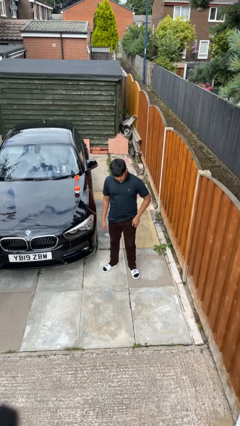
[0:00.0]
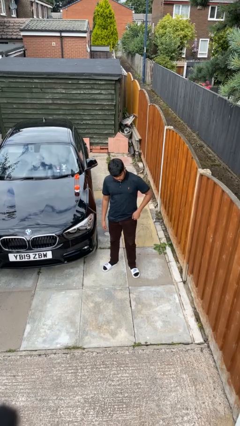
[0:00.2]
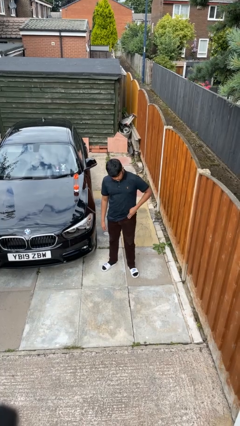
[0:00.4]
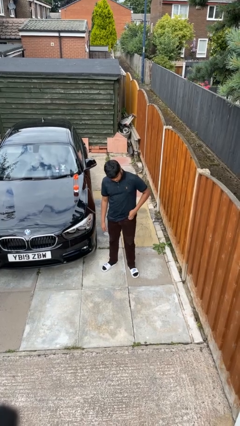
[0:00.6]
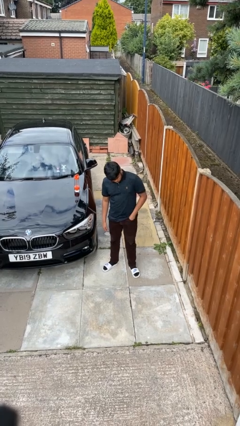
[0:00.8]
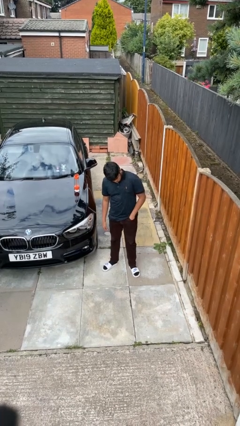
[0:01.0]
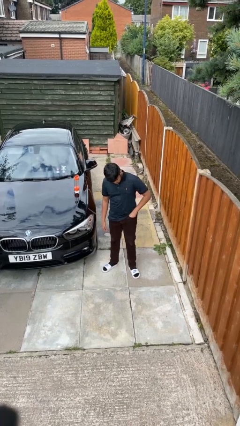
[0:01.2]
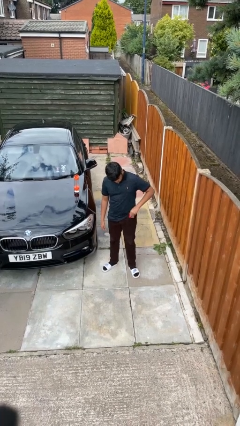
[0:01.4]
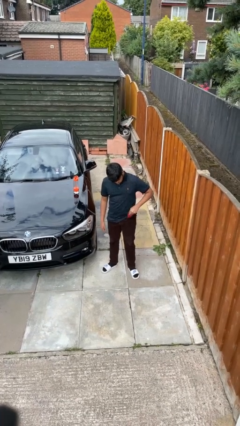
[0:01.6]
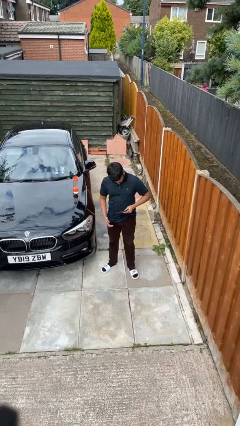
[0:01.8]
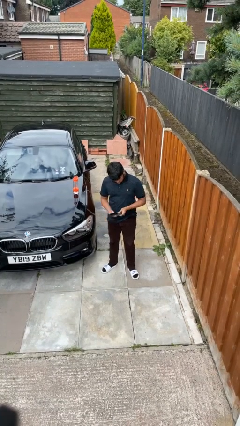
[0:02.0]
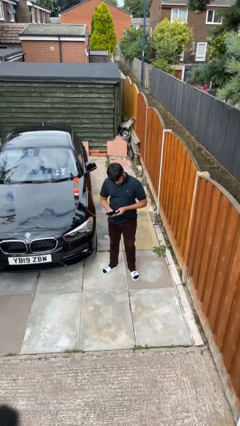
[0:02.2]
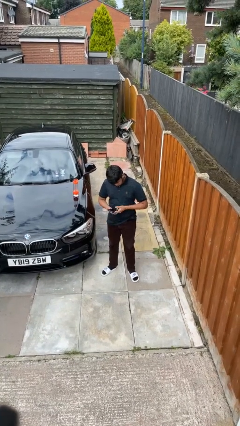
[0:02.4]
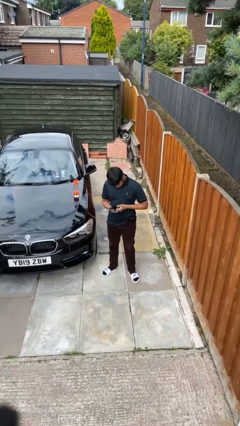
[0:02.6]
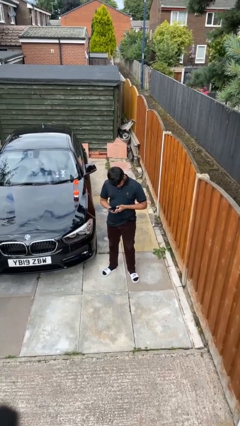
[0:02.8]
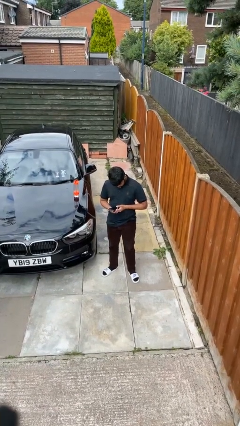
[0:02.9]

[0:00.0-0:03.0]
person takes phone from pocket

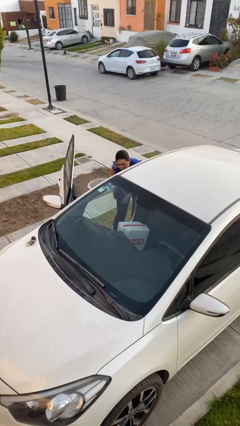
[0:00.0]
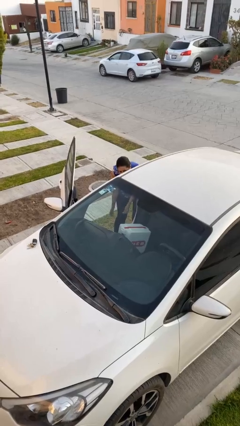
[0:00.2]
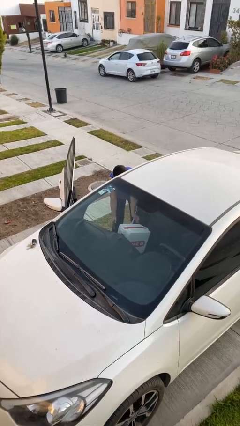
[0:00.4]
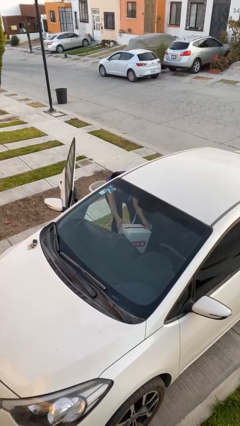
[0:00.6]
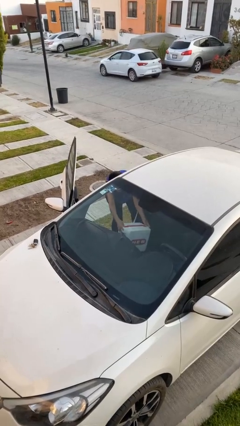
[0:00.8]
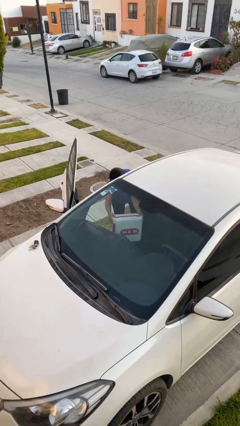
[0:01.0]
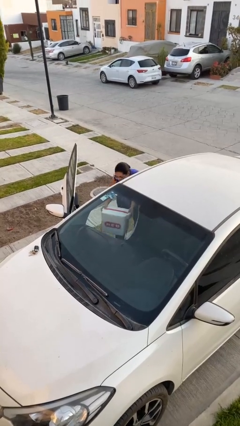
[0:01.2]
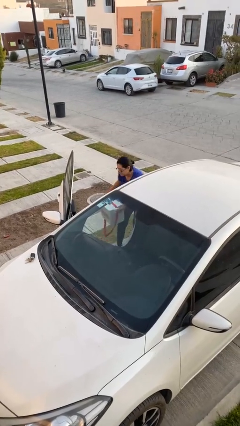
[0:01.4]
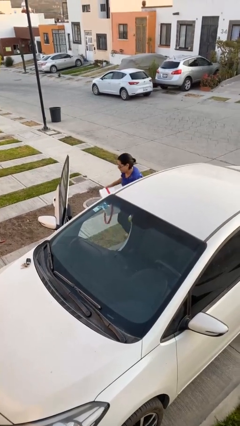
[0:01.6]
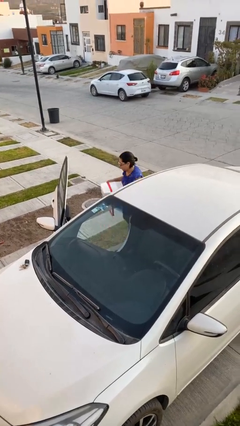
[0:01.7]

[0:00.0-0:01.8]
person unloads car

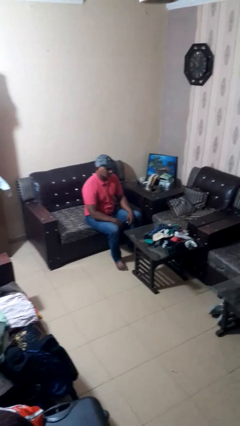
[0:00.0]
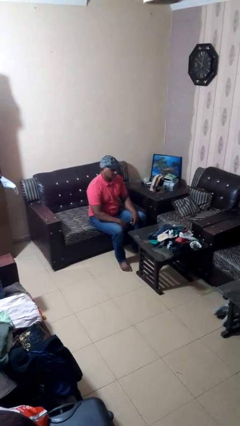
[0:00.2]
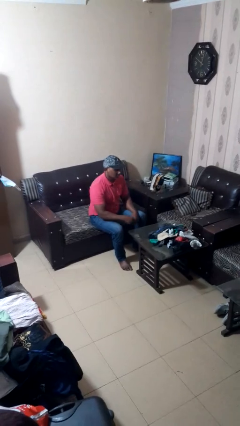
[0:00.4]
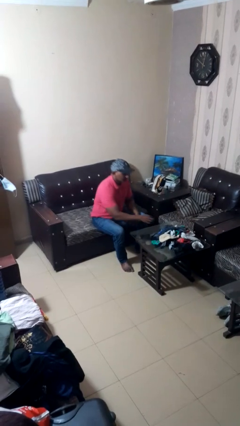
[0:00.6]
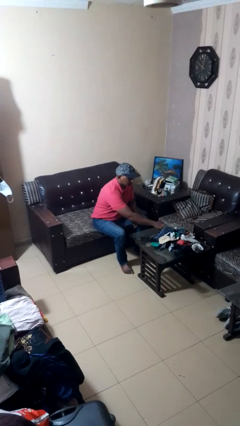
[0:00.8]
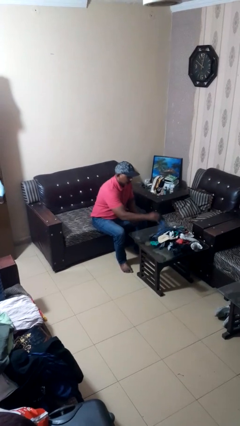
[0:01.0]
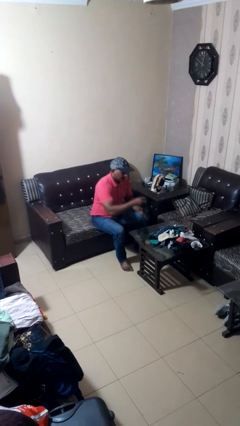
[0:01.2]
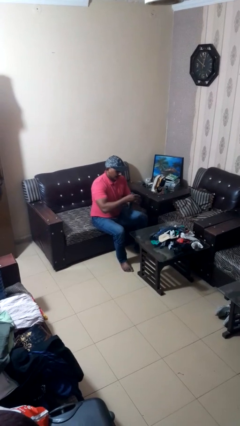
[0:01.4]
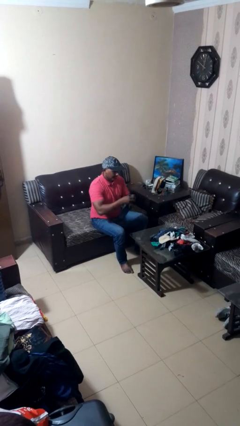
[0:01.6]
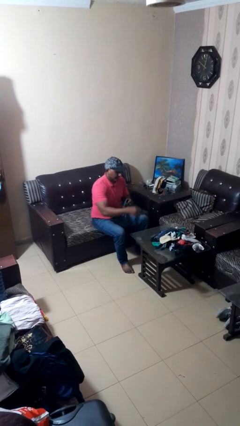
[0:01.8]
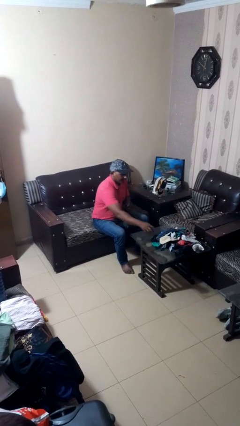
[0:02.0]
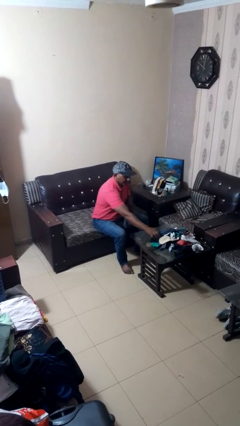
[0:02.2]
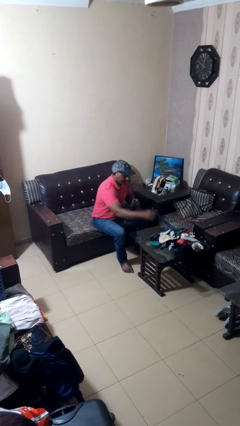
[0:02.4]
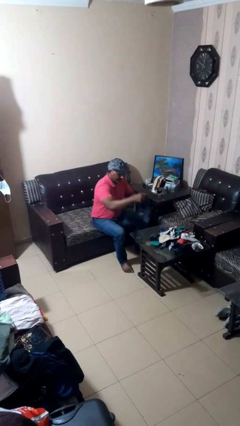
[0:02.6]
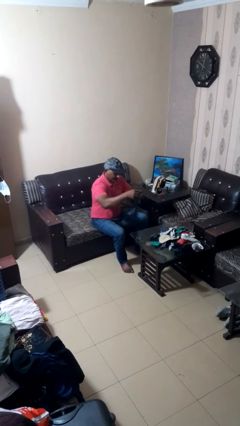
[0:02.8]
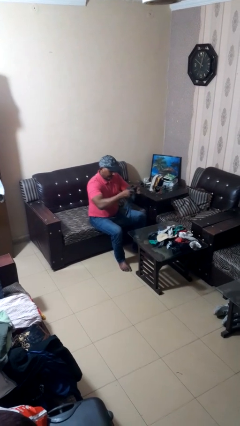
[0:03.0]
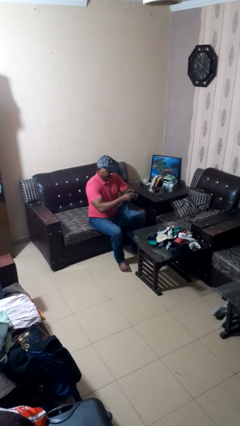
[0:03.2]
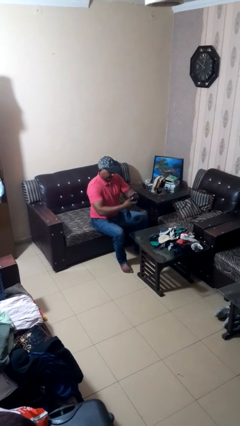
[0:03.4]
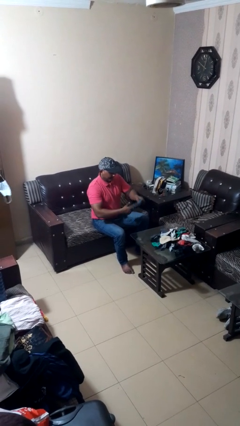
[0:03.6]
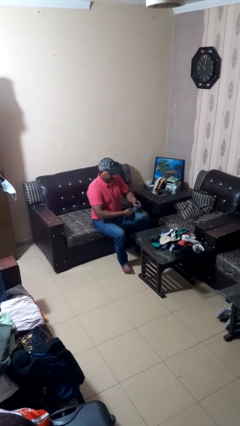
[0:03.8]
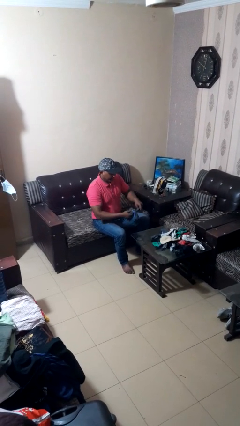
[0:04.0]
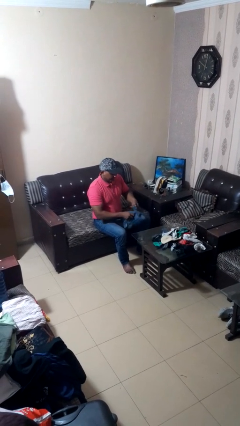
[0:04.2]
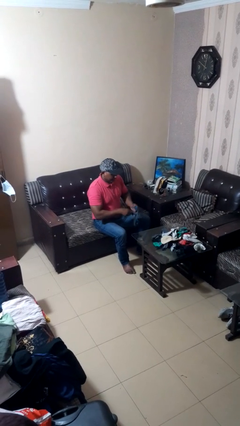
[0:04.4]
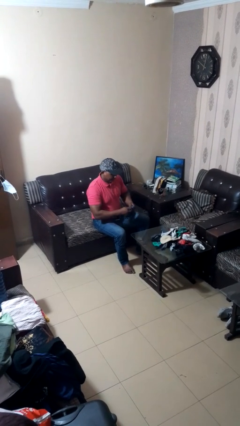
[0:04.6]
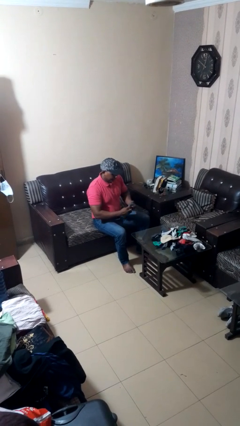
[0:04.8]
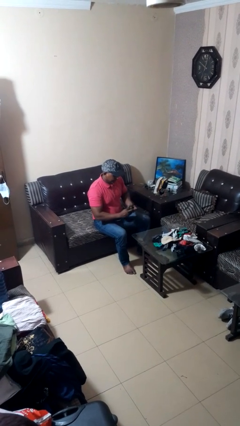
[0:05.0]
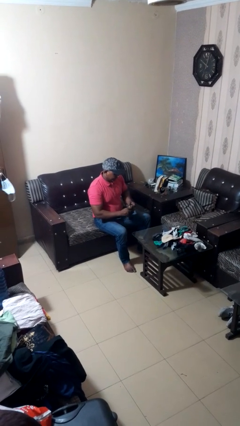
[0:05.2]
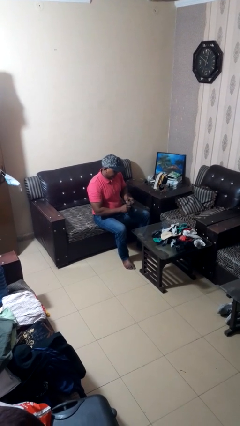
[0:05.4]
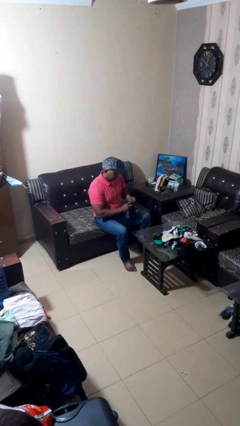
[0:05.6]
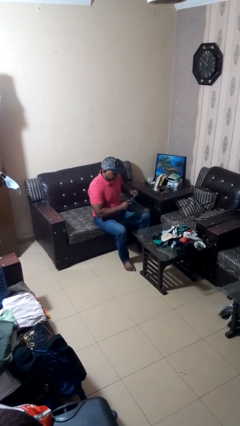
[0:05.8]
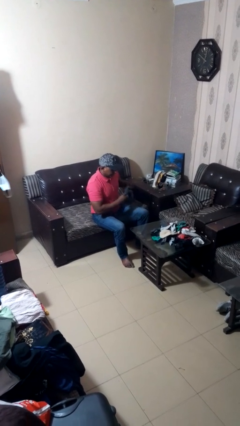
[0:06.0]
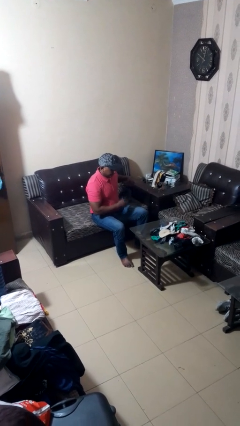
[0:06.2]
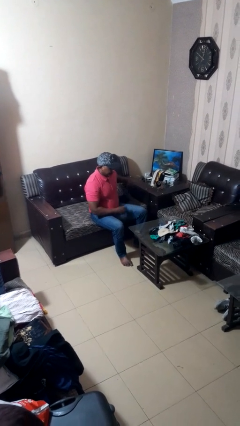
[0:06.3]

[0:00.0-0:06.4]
person folds socks

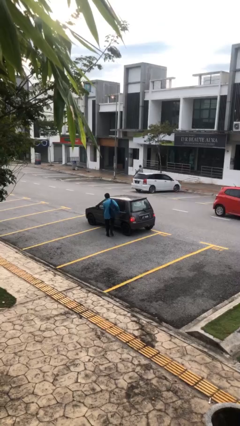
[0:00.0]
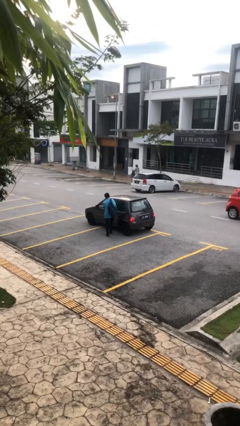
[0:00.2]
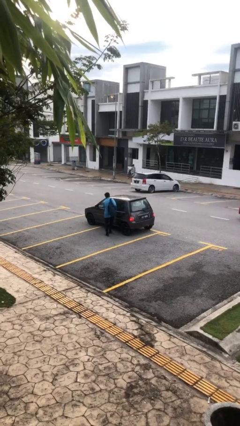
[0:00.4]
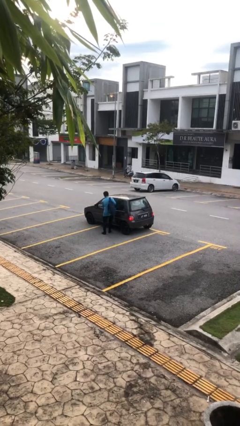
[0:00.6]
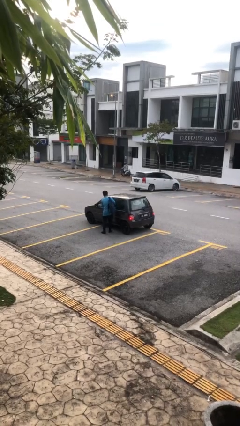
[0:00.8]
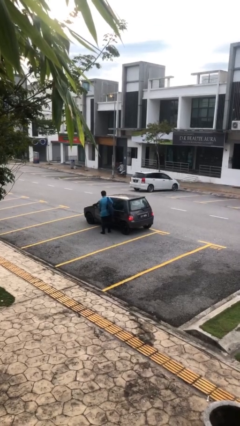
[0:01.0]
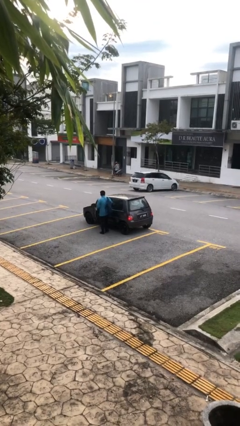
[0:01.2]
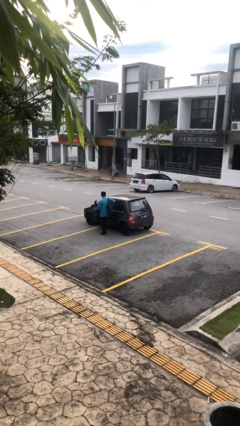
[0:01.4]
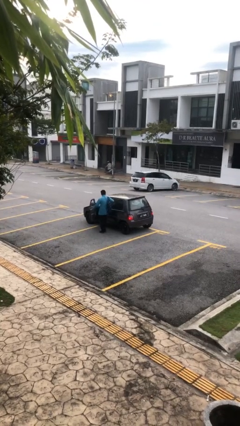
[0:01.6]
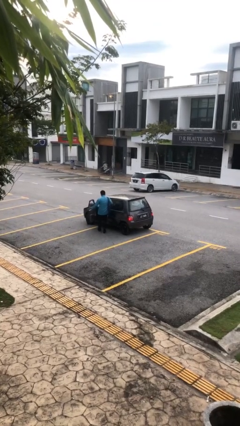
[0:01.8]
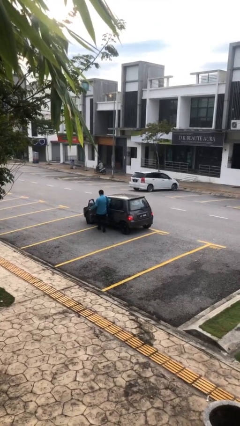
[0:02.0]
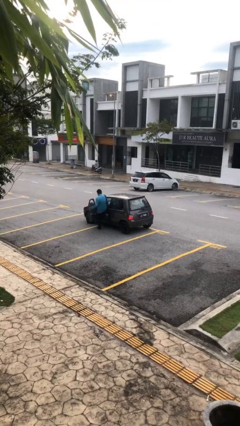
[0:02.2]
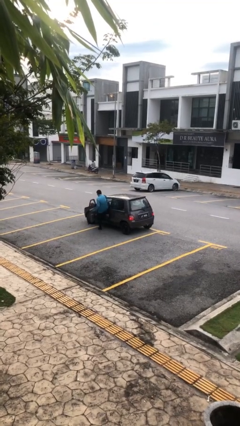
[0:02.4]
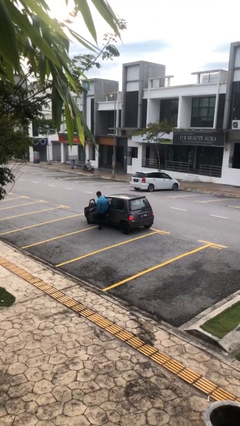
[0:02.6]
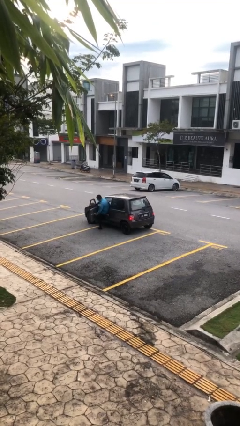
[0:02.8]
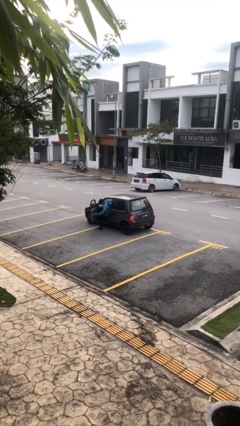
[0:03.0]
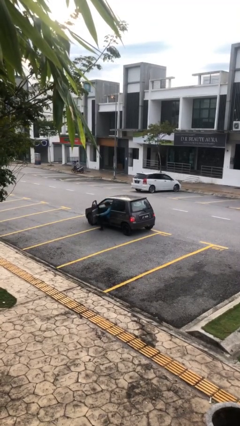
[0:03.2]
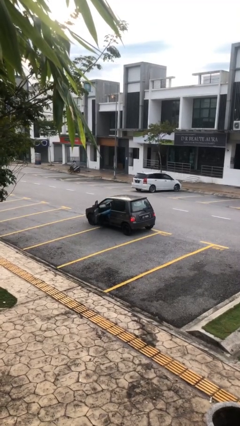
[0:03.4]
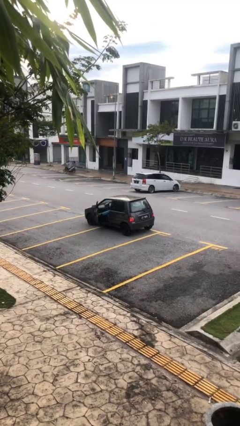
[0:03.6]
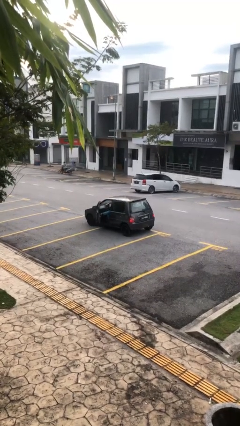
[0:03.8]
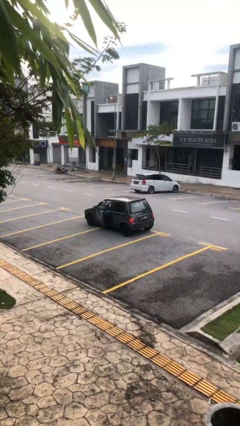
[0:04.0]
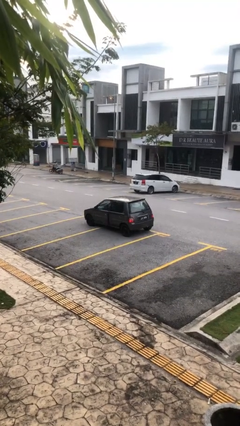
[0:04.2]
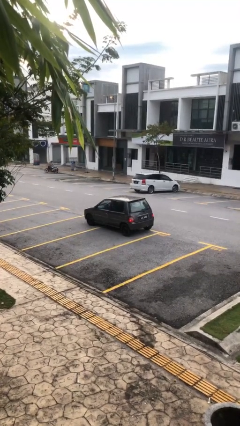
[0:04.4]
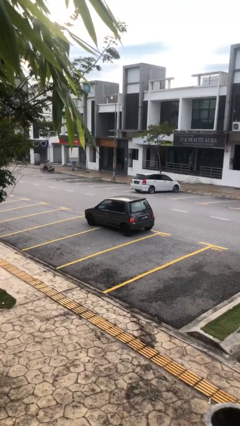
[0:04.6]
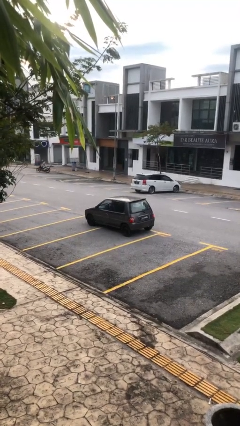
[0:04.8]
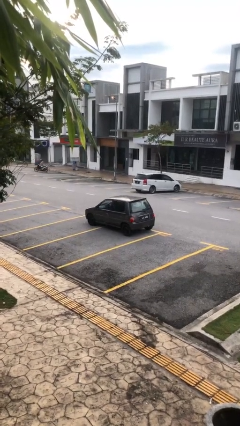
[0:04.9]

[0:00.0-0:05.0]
car picks up person

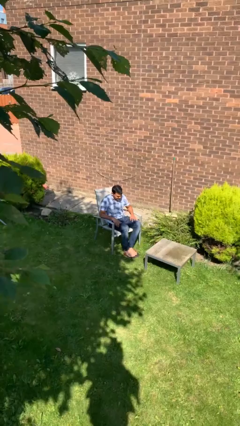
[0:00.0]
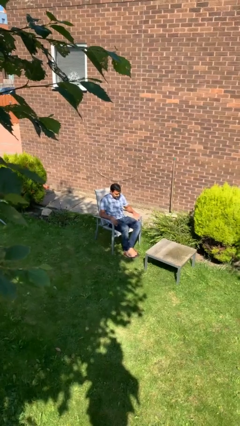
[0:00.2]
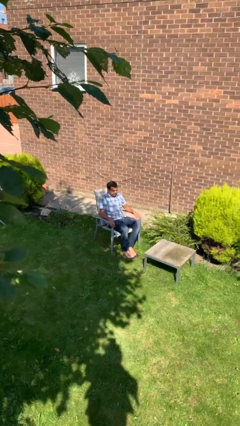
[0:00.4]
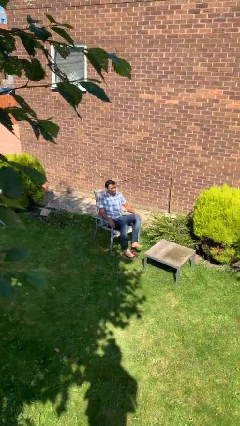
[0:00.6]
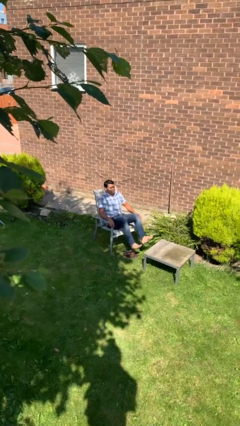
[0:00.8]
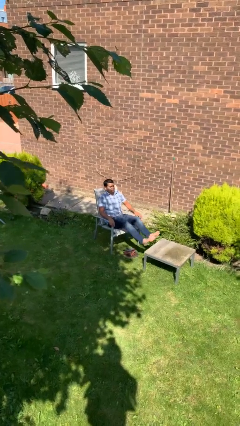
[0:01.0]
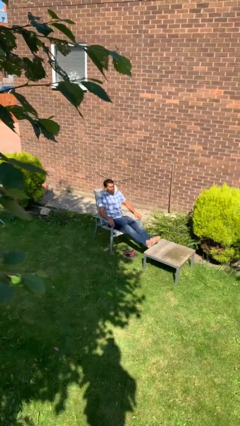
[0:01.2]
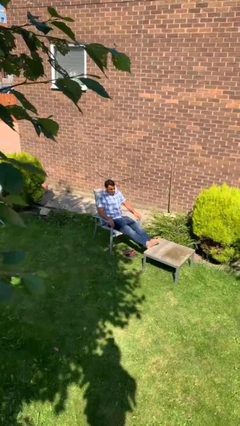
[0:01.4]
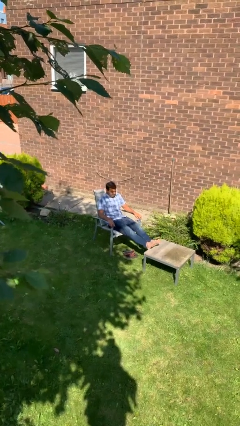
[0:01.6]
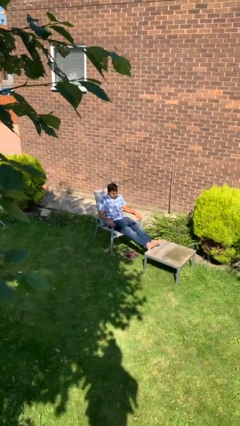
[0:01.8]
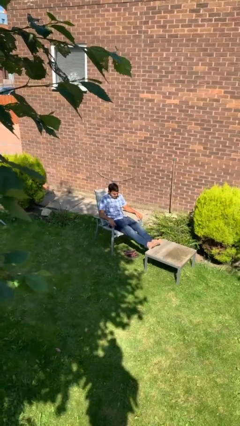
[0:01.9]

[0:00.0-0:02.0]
person puts feet up
